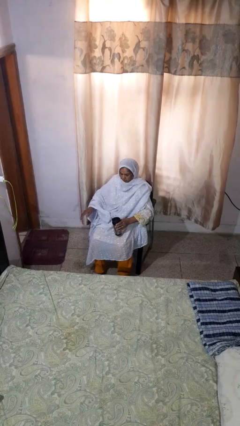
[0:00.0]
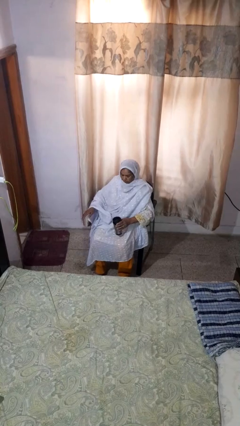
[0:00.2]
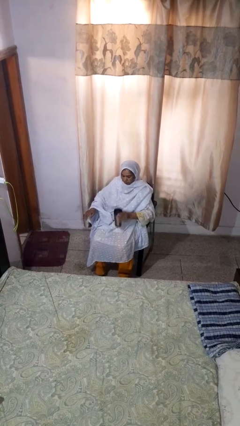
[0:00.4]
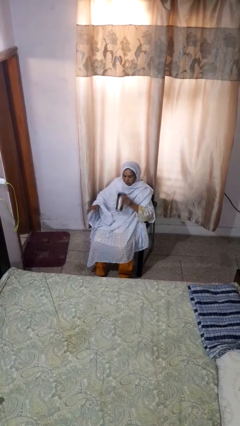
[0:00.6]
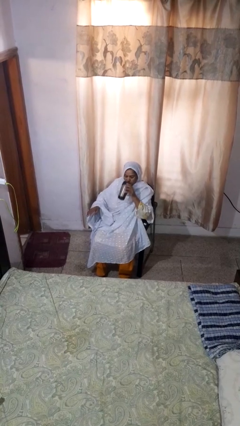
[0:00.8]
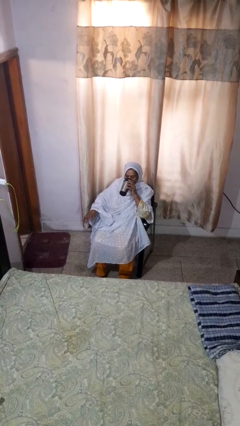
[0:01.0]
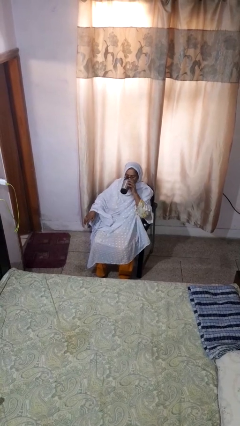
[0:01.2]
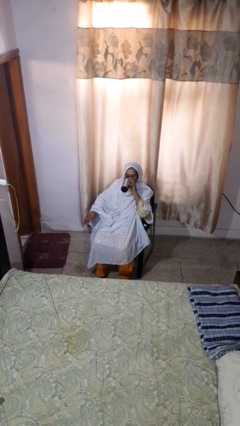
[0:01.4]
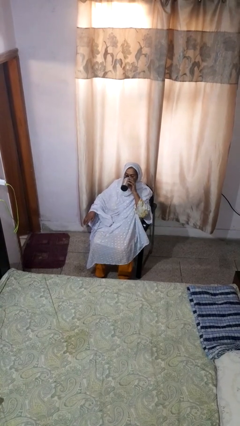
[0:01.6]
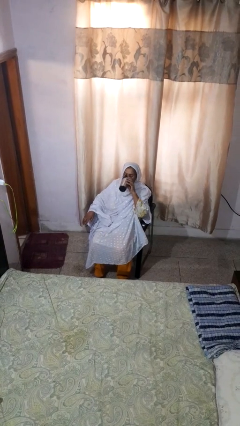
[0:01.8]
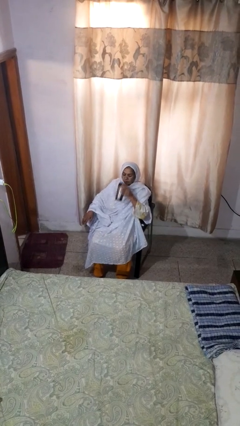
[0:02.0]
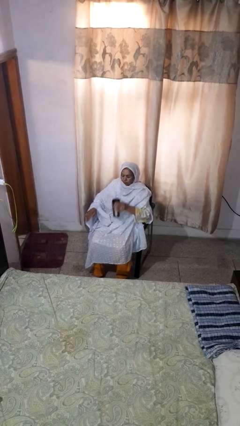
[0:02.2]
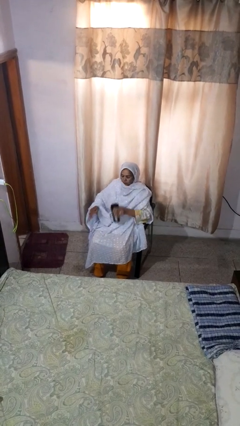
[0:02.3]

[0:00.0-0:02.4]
person drinks from beverage can

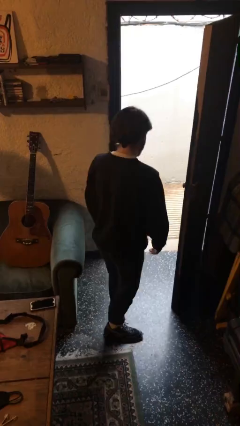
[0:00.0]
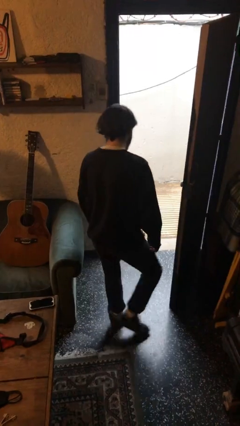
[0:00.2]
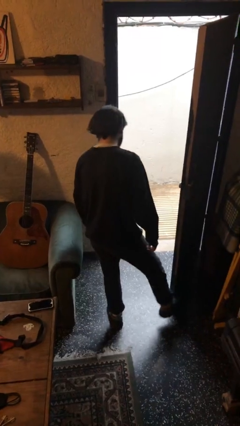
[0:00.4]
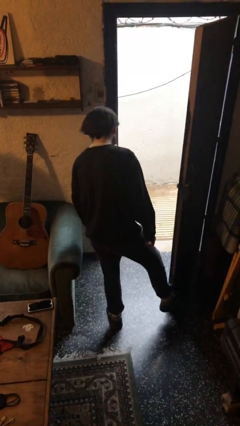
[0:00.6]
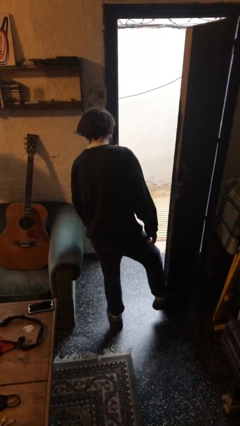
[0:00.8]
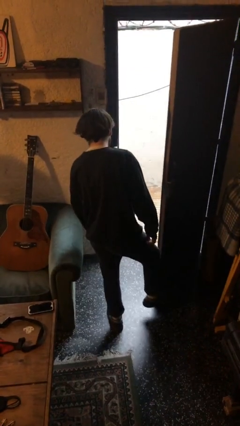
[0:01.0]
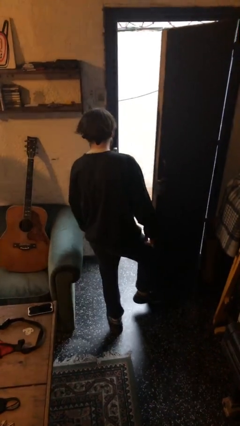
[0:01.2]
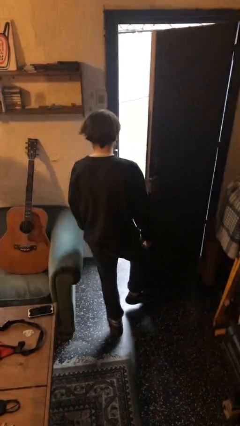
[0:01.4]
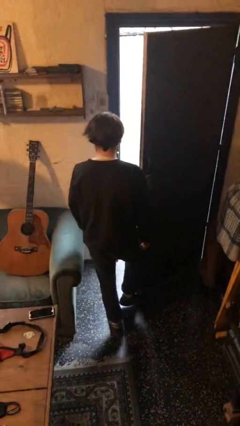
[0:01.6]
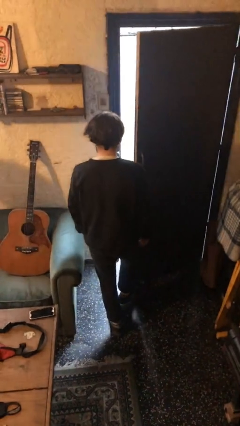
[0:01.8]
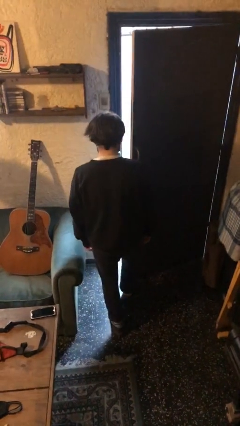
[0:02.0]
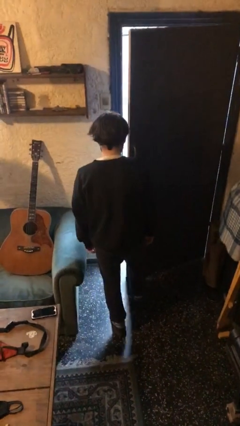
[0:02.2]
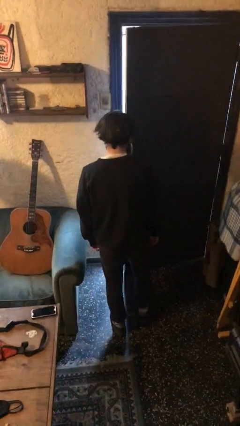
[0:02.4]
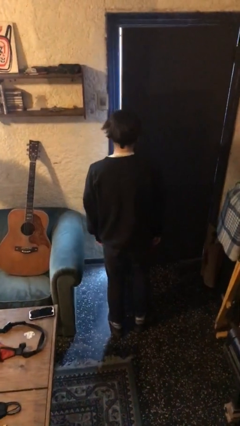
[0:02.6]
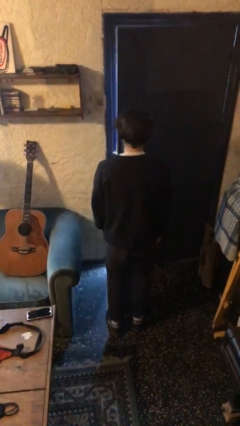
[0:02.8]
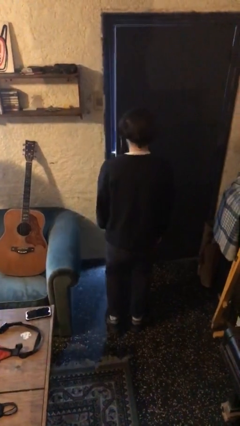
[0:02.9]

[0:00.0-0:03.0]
person closes door with foot

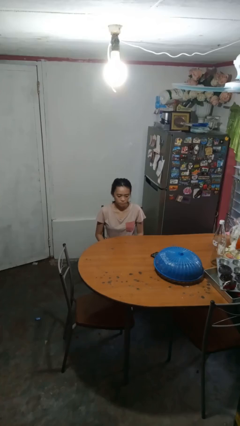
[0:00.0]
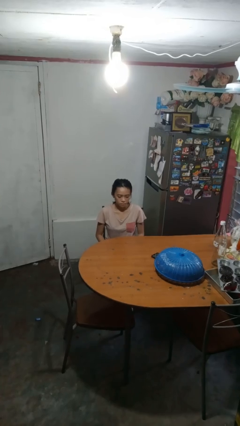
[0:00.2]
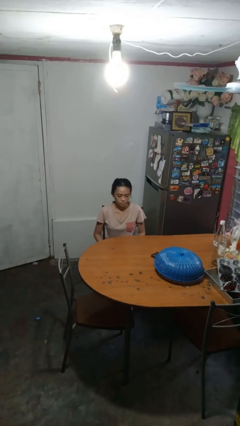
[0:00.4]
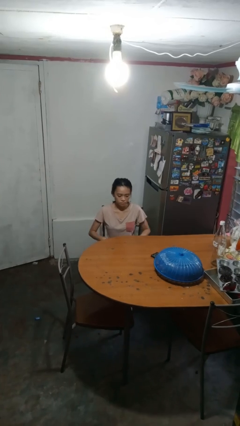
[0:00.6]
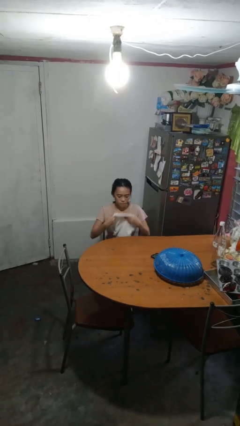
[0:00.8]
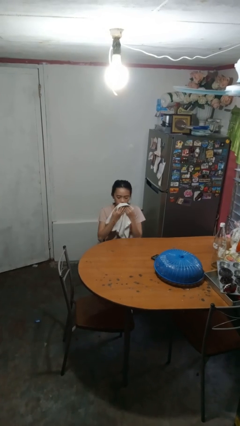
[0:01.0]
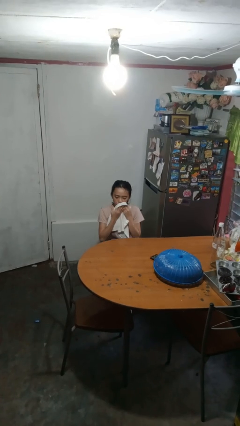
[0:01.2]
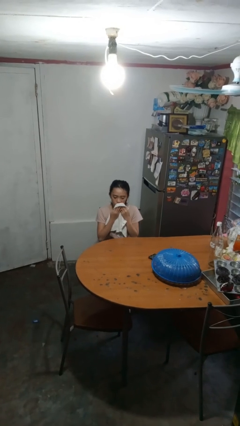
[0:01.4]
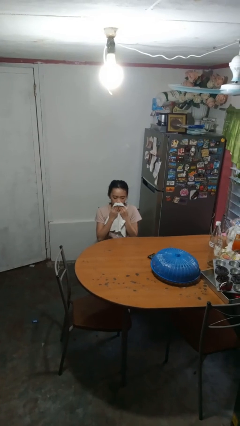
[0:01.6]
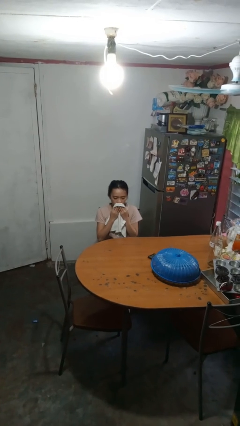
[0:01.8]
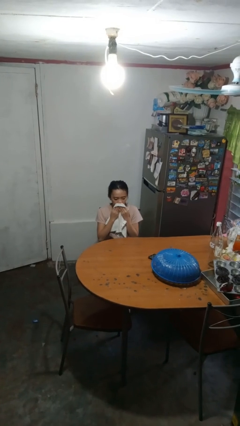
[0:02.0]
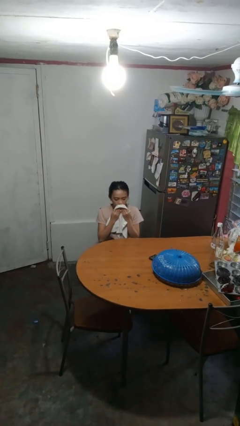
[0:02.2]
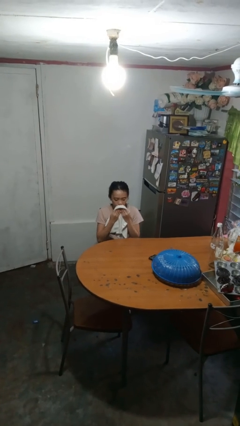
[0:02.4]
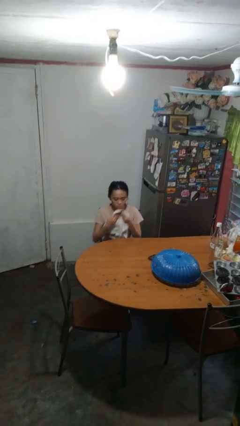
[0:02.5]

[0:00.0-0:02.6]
person wipes mouth with napkin

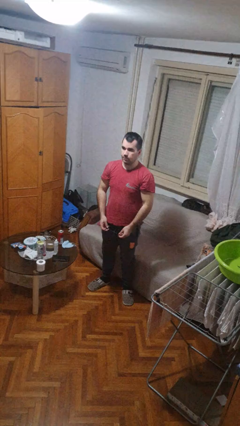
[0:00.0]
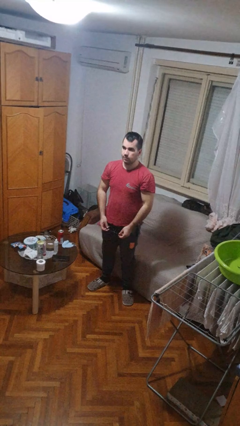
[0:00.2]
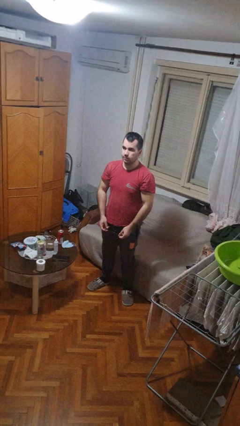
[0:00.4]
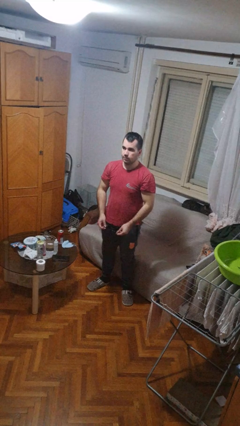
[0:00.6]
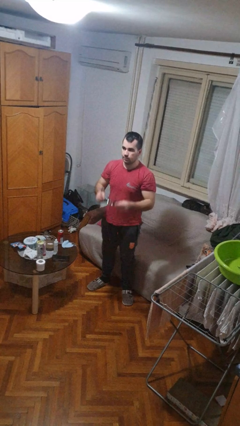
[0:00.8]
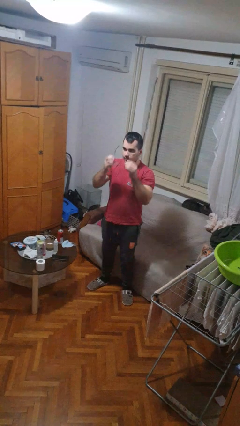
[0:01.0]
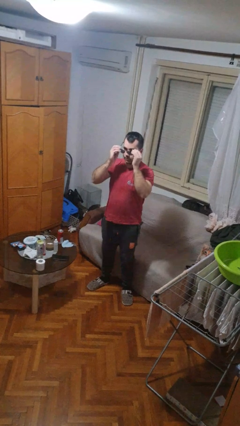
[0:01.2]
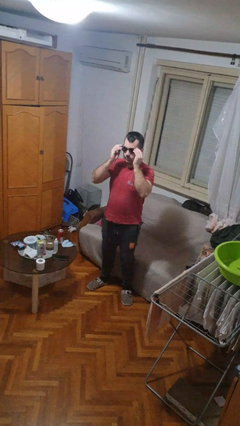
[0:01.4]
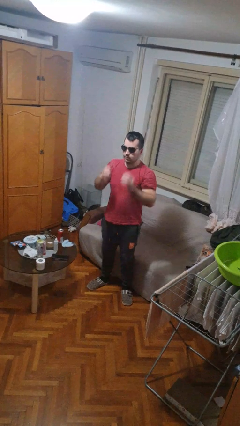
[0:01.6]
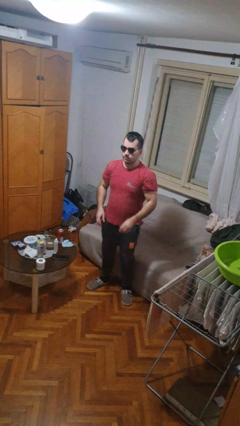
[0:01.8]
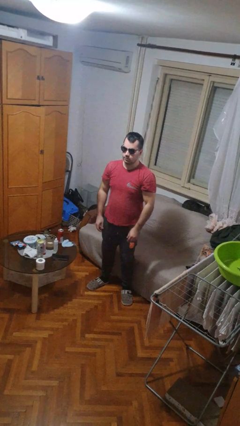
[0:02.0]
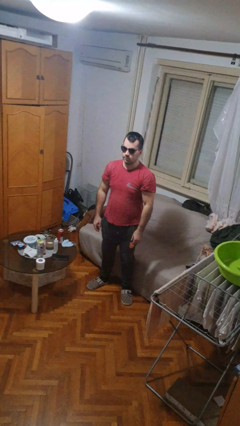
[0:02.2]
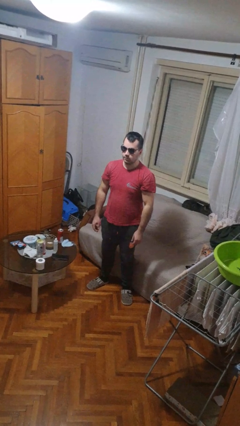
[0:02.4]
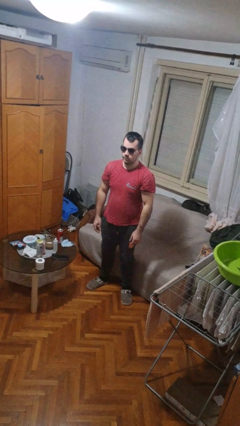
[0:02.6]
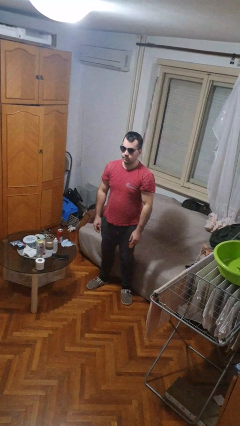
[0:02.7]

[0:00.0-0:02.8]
person puts on sunglasses

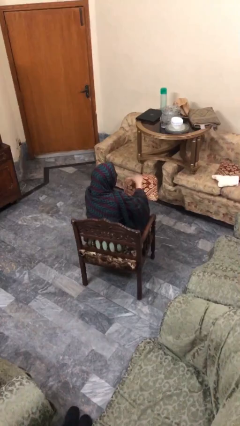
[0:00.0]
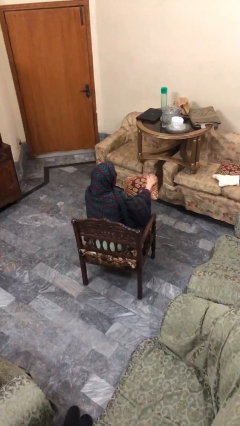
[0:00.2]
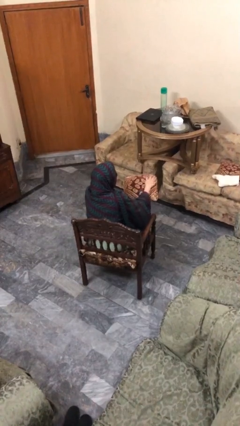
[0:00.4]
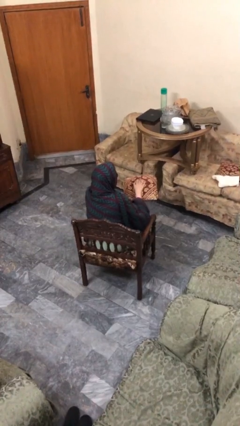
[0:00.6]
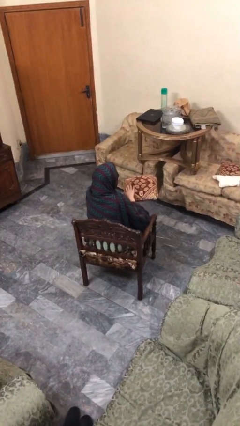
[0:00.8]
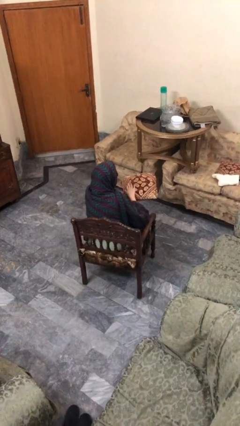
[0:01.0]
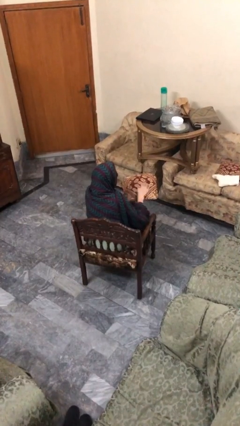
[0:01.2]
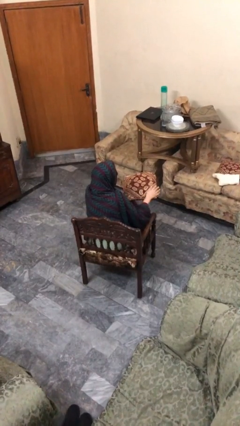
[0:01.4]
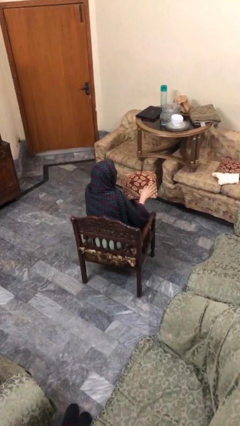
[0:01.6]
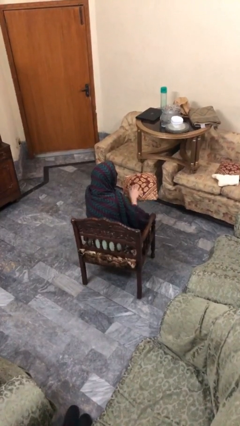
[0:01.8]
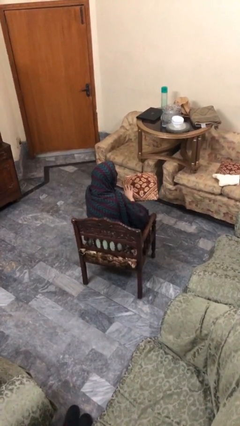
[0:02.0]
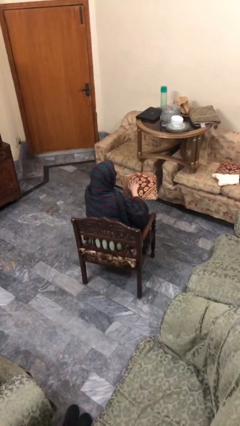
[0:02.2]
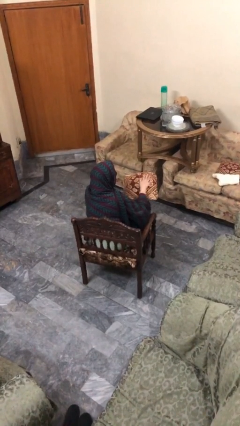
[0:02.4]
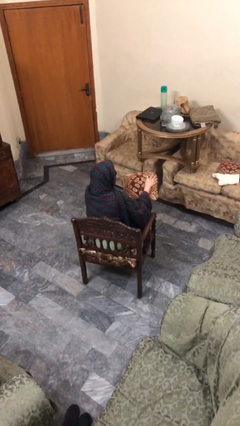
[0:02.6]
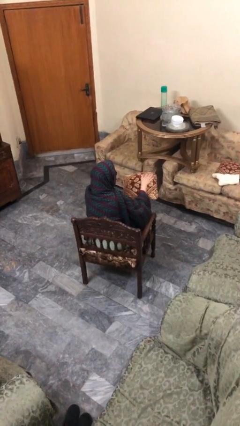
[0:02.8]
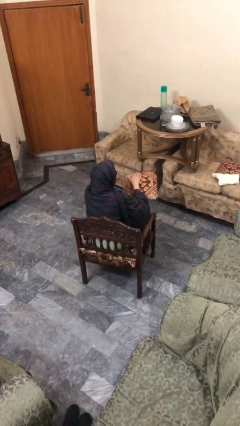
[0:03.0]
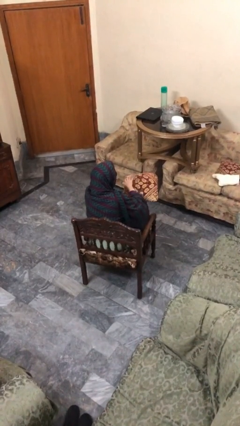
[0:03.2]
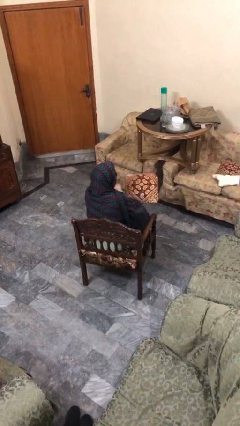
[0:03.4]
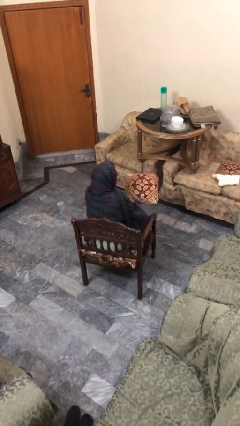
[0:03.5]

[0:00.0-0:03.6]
person waves hand over object

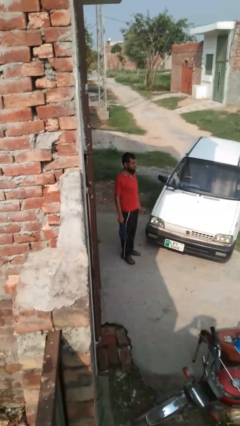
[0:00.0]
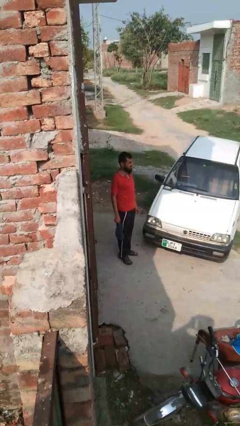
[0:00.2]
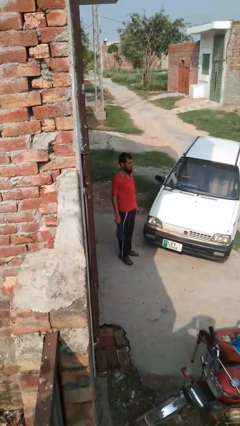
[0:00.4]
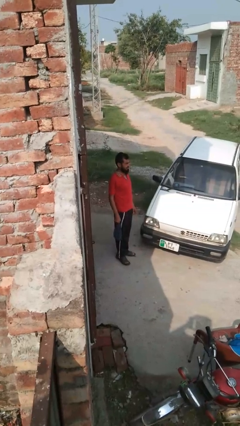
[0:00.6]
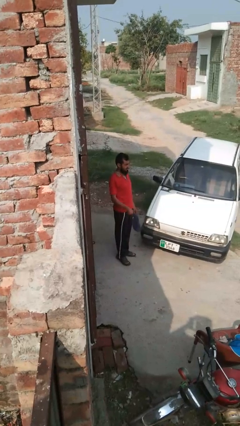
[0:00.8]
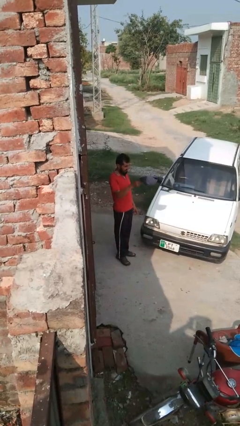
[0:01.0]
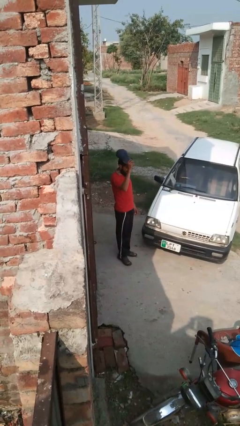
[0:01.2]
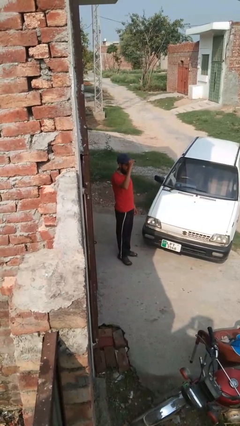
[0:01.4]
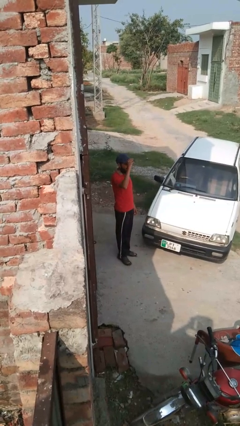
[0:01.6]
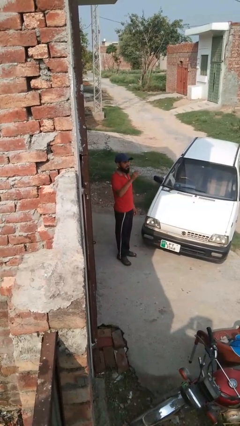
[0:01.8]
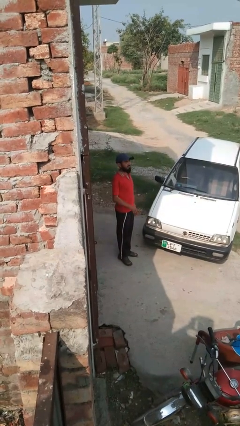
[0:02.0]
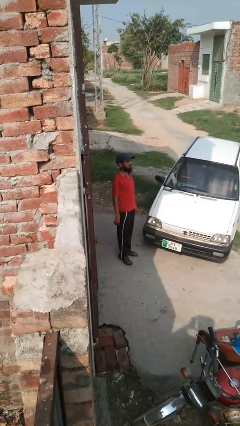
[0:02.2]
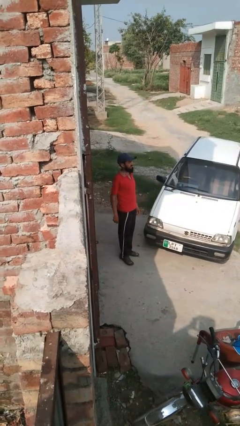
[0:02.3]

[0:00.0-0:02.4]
person puts on hat

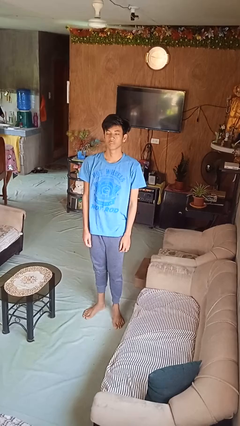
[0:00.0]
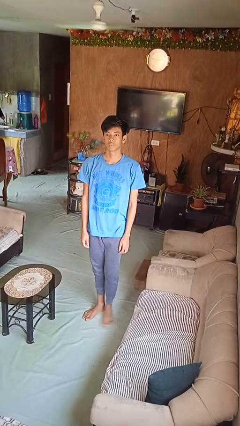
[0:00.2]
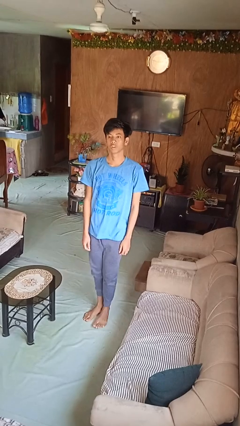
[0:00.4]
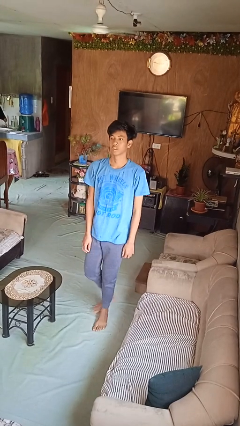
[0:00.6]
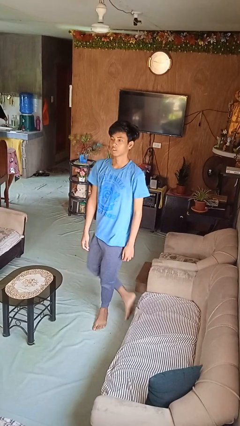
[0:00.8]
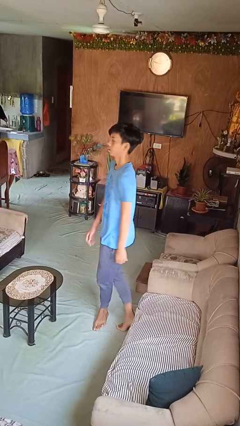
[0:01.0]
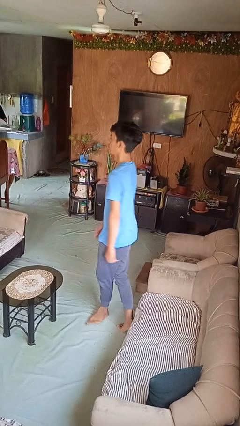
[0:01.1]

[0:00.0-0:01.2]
person twirls
